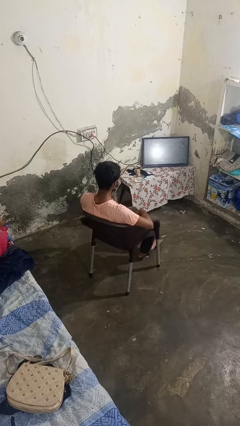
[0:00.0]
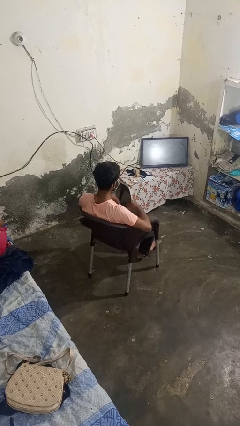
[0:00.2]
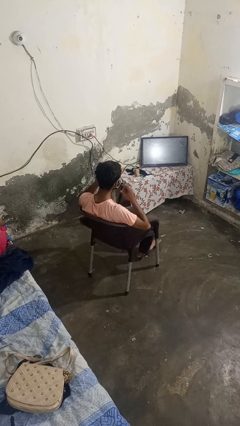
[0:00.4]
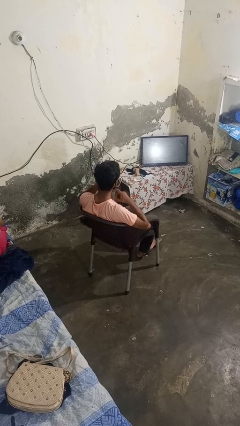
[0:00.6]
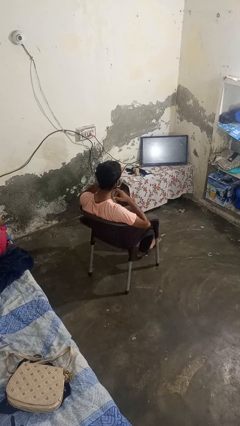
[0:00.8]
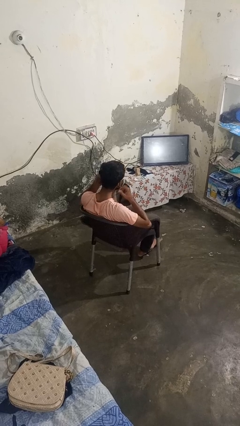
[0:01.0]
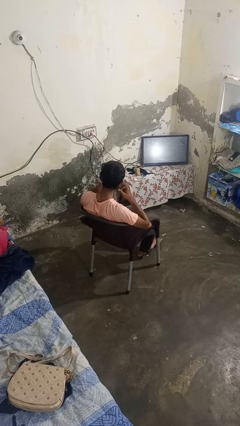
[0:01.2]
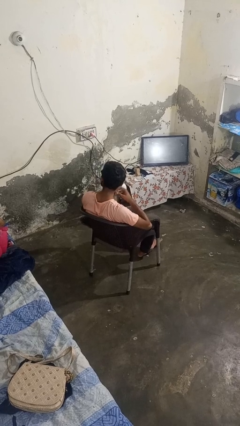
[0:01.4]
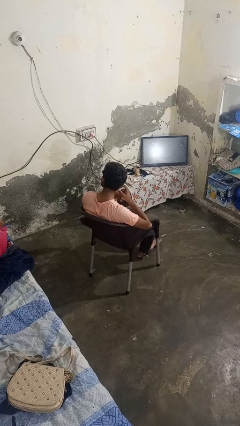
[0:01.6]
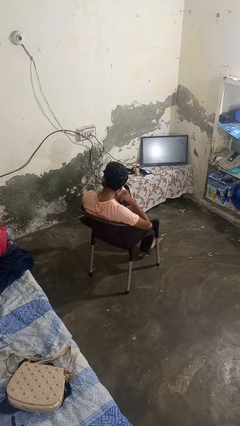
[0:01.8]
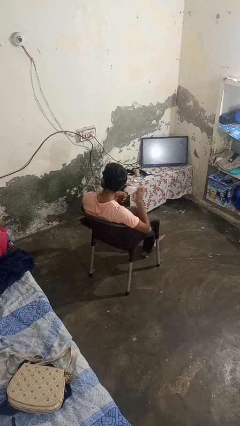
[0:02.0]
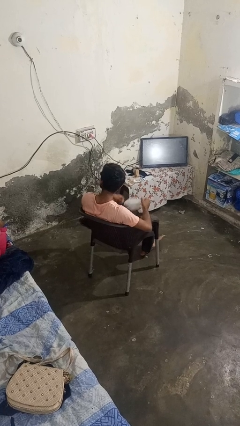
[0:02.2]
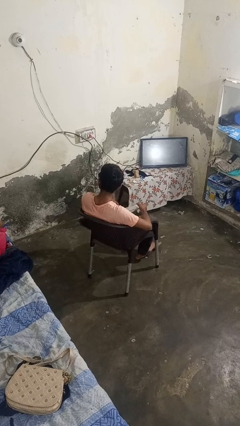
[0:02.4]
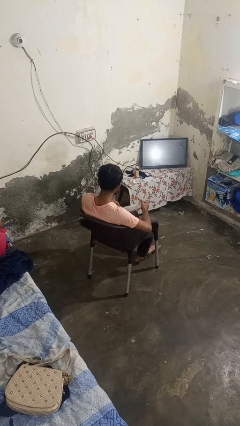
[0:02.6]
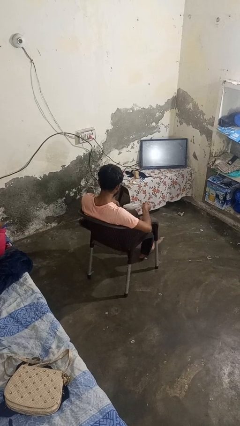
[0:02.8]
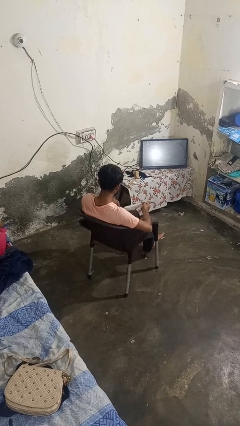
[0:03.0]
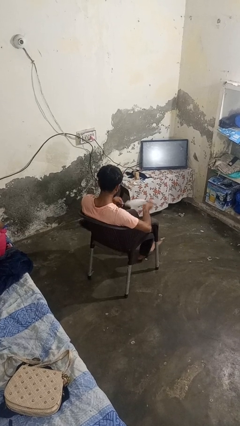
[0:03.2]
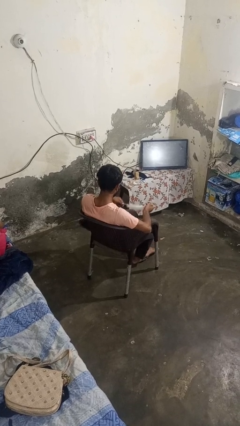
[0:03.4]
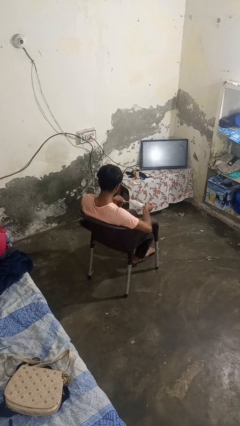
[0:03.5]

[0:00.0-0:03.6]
person takes off facemask

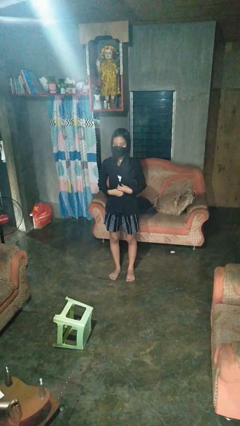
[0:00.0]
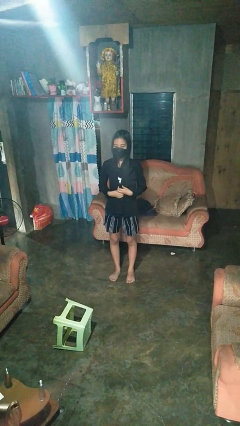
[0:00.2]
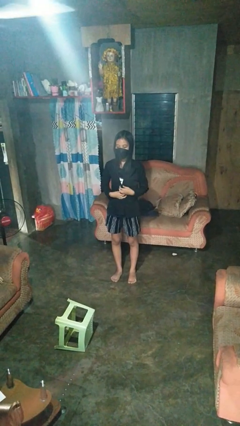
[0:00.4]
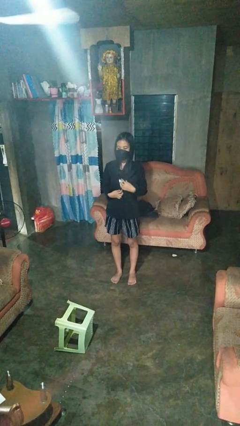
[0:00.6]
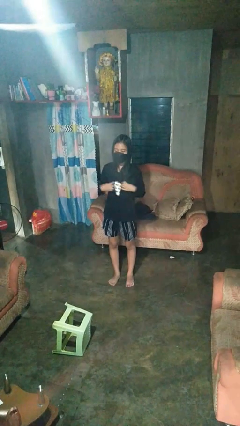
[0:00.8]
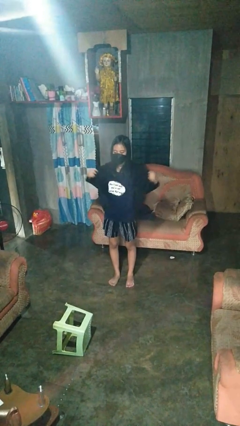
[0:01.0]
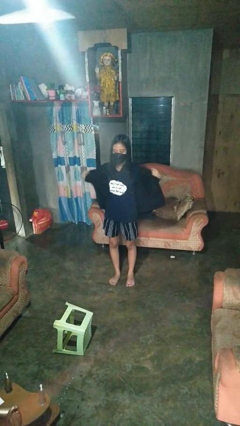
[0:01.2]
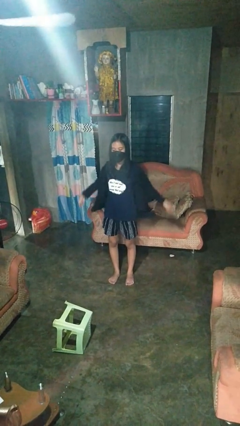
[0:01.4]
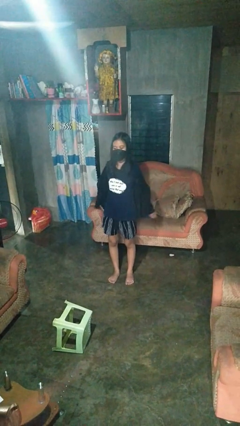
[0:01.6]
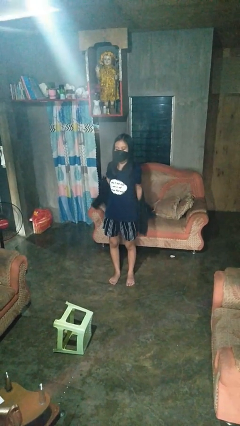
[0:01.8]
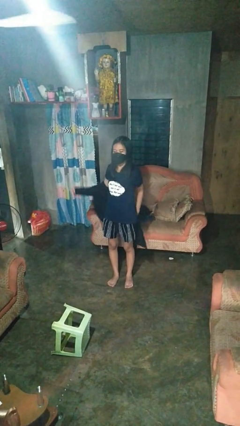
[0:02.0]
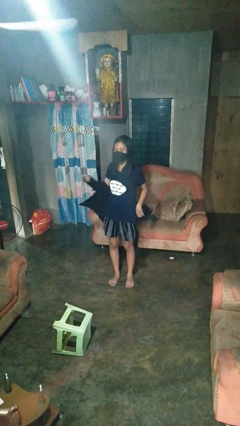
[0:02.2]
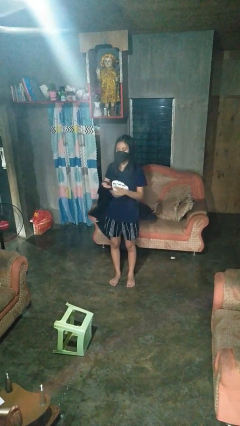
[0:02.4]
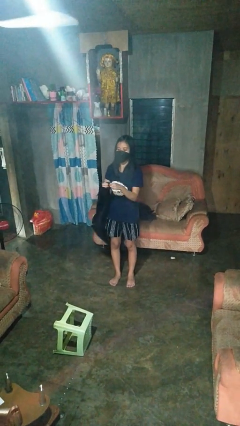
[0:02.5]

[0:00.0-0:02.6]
person takes off shirt

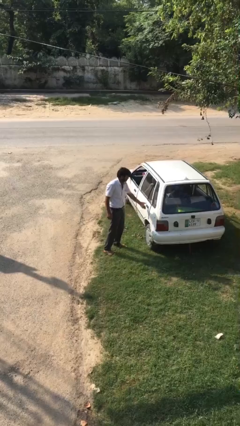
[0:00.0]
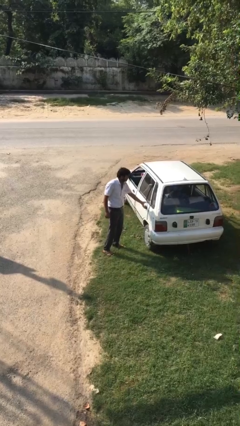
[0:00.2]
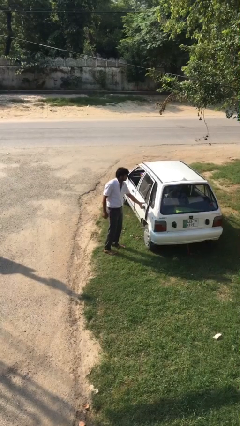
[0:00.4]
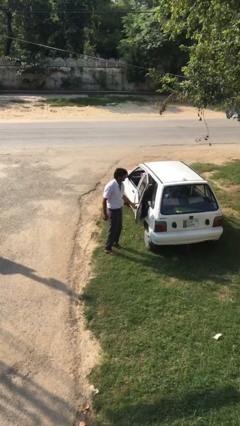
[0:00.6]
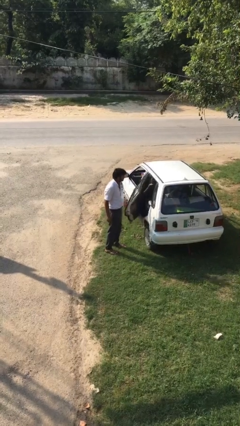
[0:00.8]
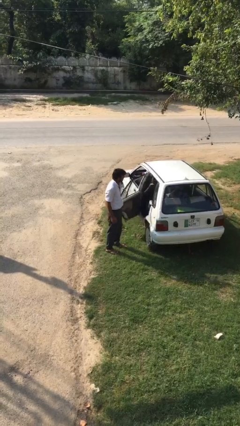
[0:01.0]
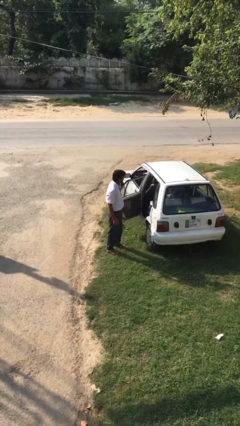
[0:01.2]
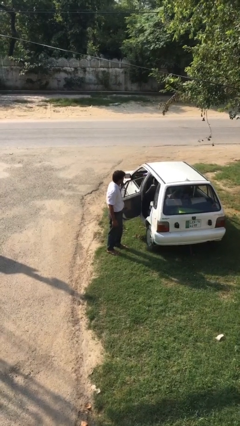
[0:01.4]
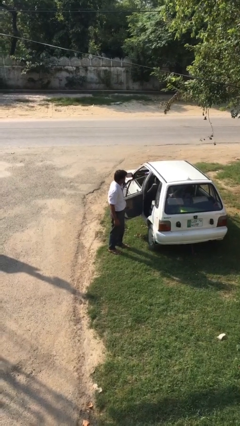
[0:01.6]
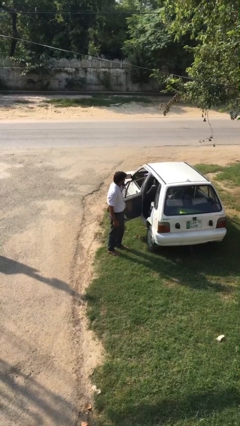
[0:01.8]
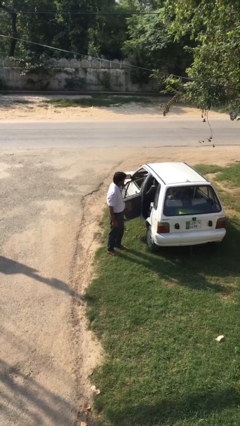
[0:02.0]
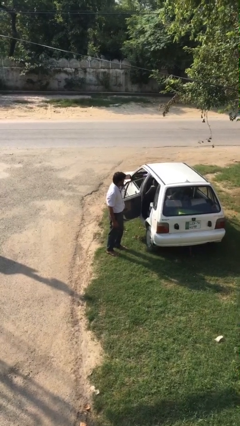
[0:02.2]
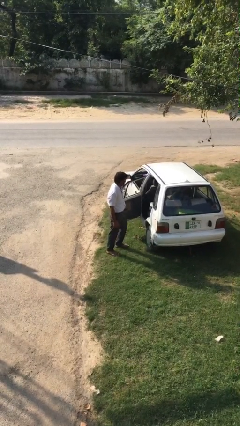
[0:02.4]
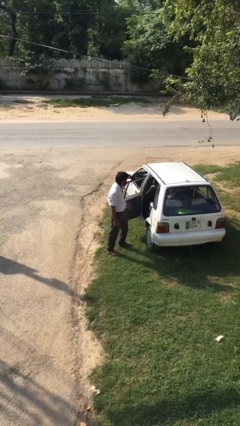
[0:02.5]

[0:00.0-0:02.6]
person opens car door

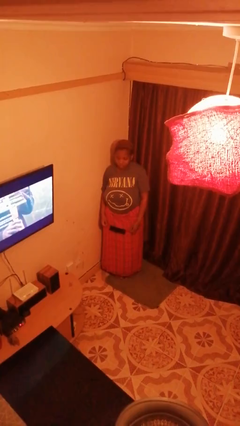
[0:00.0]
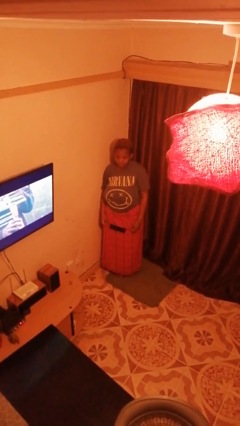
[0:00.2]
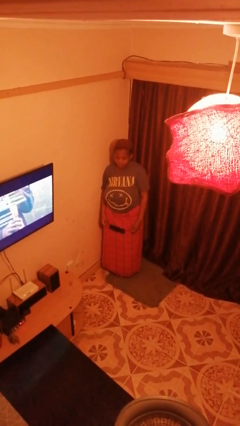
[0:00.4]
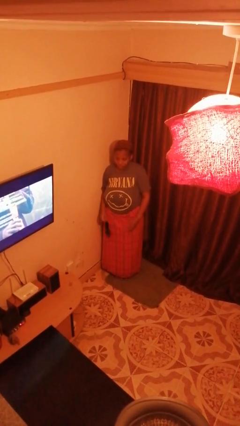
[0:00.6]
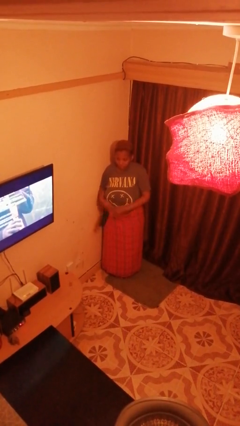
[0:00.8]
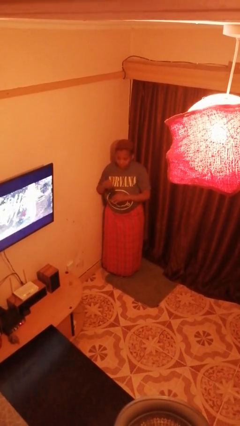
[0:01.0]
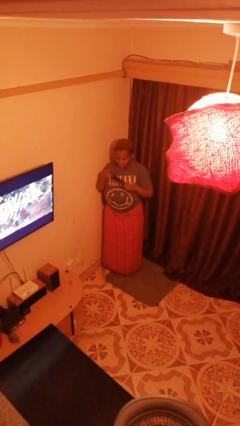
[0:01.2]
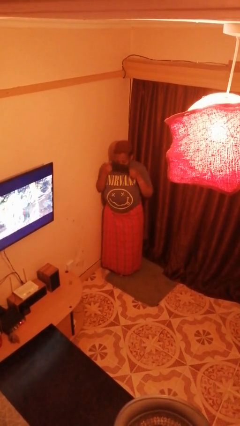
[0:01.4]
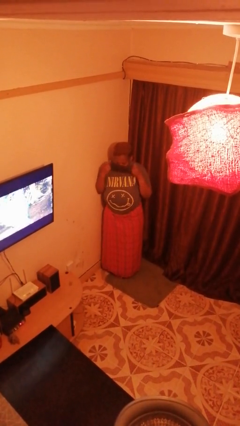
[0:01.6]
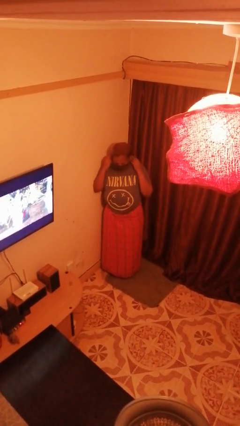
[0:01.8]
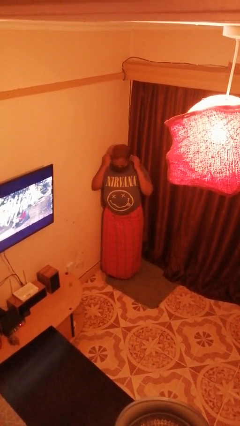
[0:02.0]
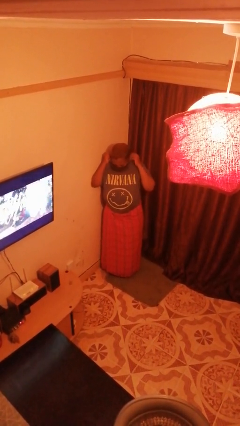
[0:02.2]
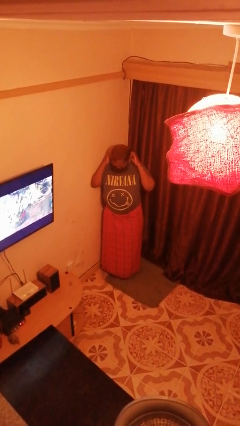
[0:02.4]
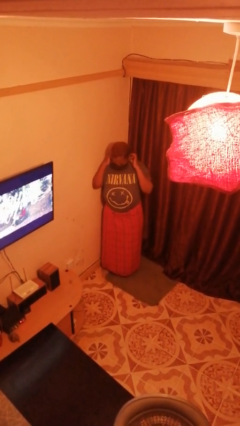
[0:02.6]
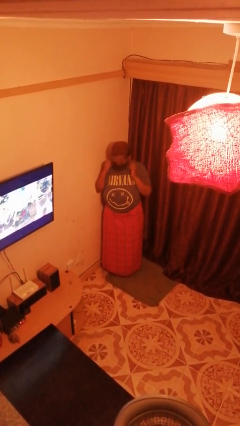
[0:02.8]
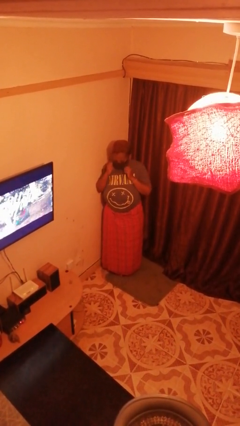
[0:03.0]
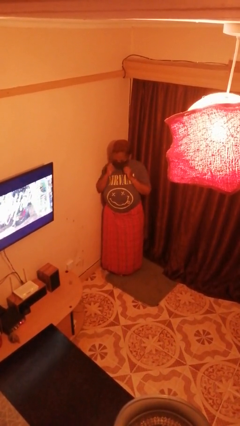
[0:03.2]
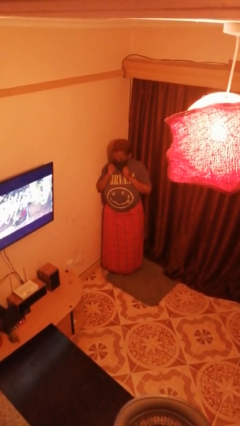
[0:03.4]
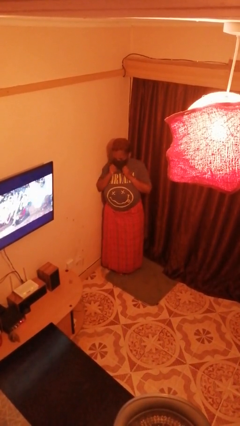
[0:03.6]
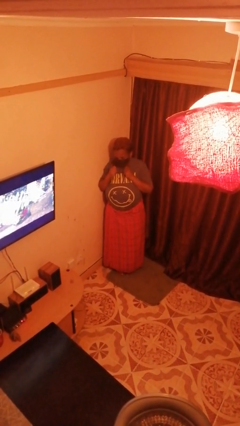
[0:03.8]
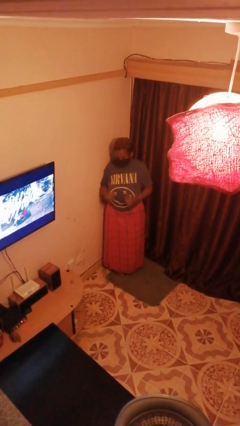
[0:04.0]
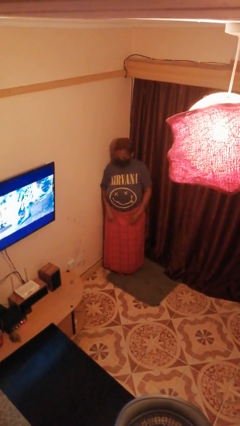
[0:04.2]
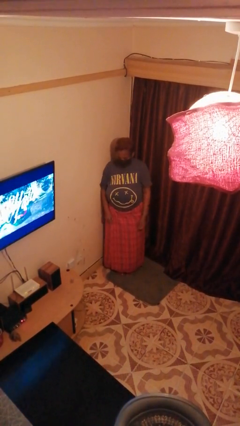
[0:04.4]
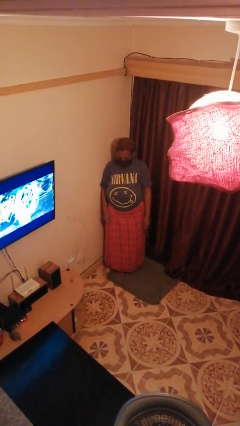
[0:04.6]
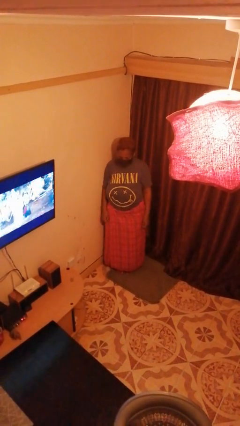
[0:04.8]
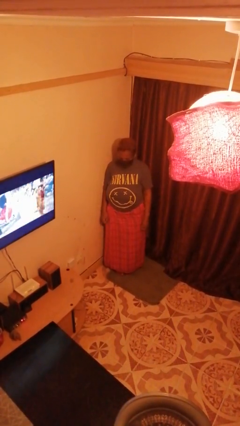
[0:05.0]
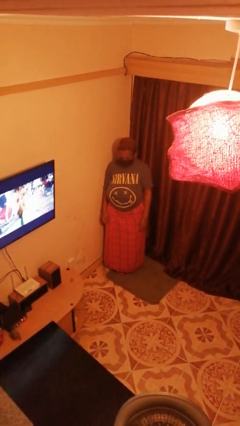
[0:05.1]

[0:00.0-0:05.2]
person puts on facemask

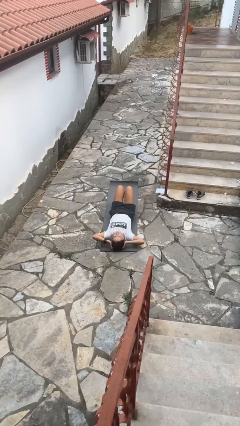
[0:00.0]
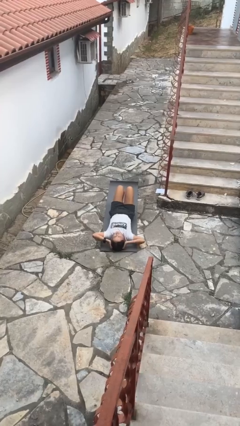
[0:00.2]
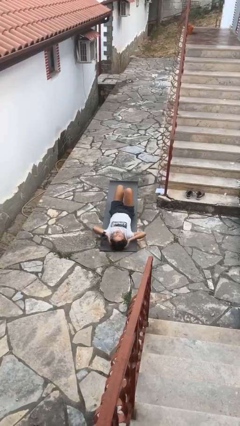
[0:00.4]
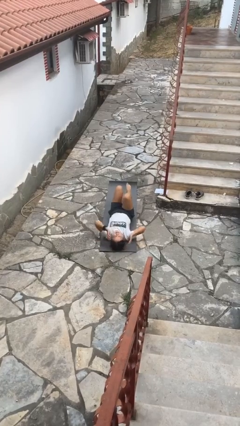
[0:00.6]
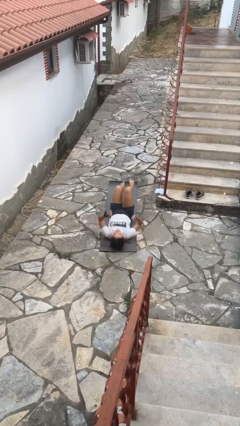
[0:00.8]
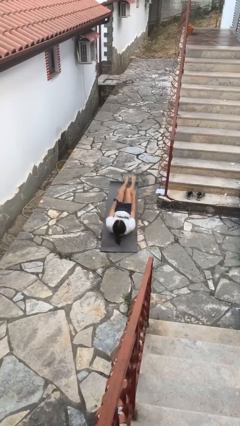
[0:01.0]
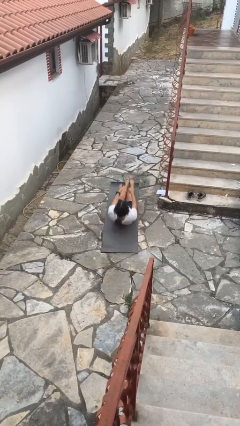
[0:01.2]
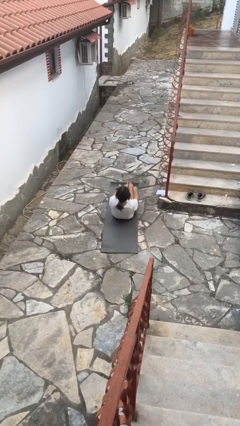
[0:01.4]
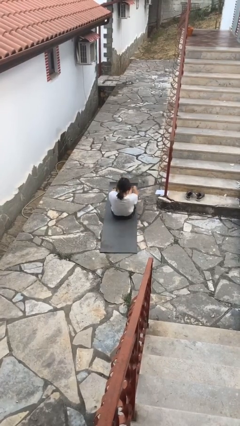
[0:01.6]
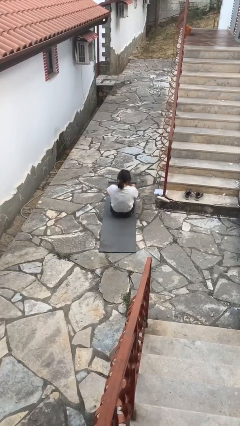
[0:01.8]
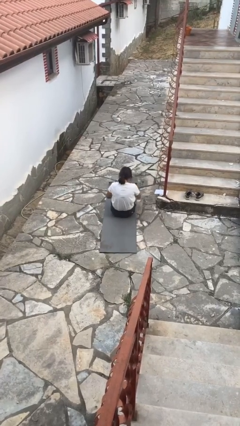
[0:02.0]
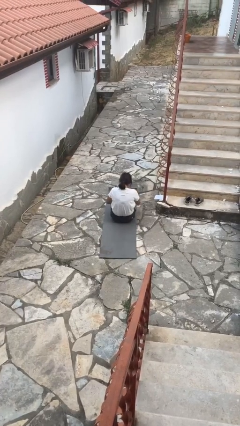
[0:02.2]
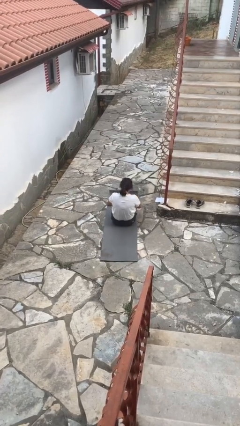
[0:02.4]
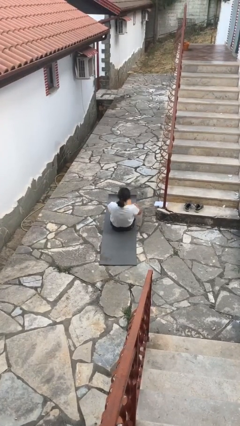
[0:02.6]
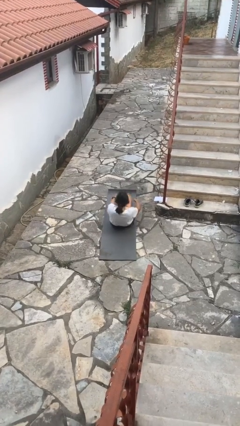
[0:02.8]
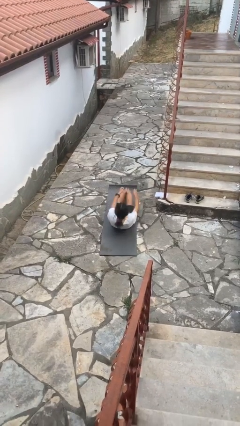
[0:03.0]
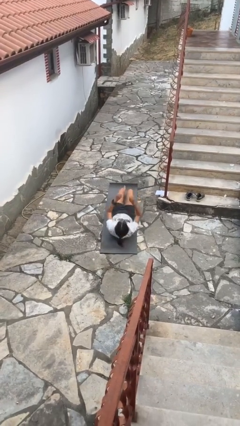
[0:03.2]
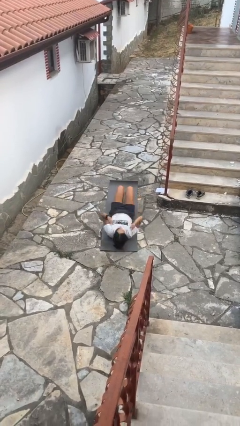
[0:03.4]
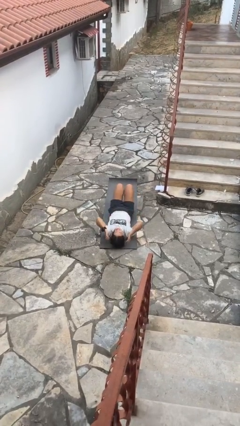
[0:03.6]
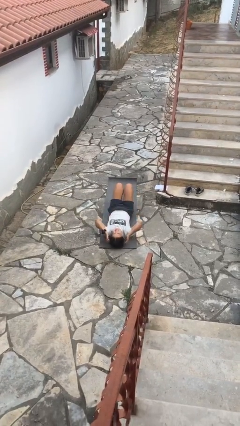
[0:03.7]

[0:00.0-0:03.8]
person exercises with situp

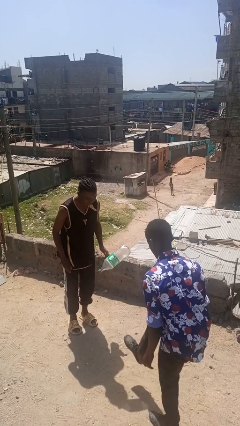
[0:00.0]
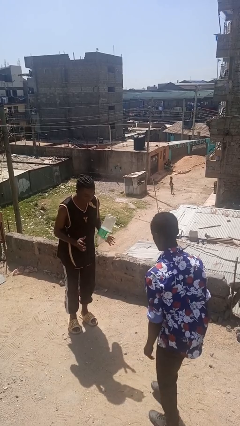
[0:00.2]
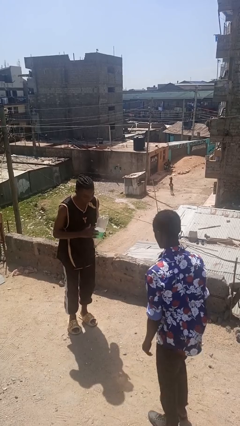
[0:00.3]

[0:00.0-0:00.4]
person kicks object to person
